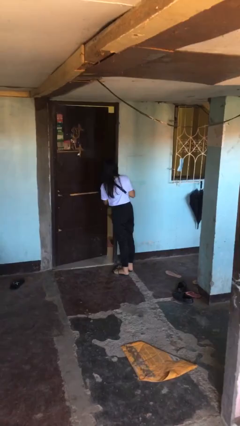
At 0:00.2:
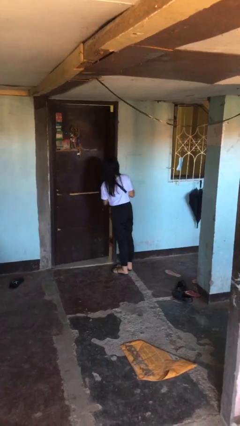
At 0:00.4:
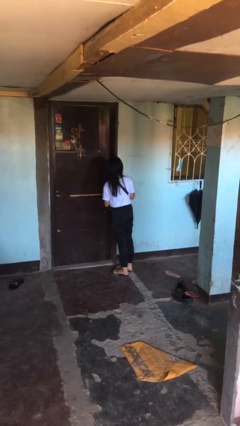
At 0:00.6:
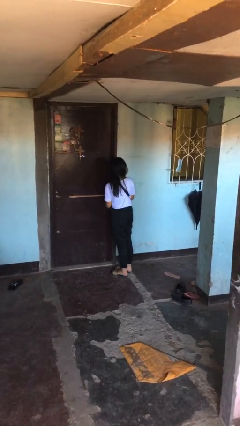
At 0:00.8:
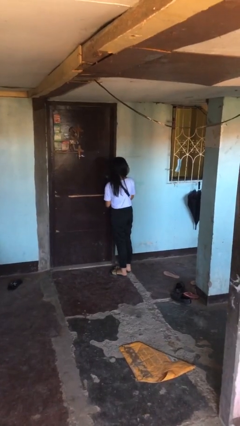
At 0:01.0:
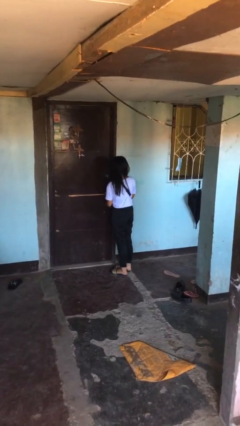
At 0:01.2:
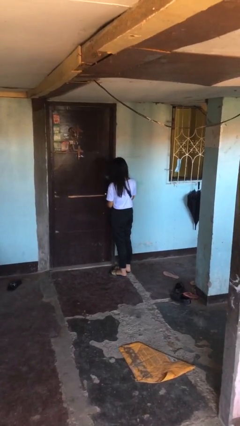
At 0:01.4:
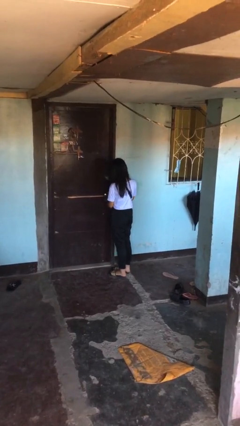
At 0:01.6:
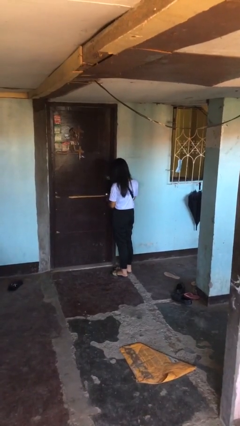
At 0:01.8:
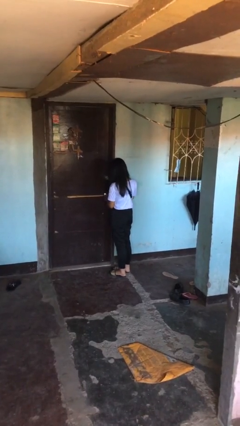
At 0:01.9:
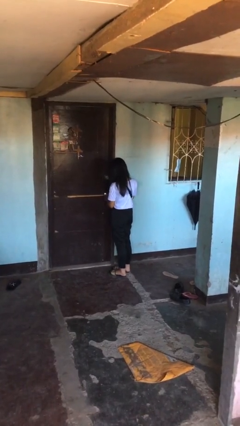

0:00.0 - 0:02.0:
person closes facility door

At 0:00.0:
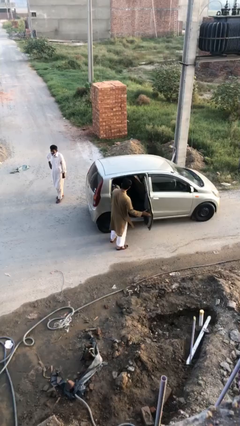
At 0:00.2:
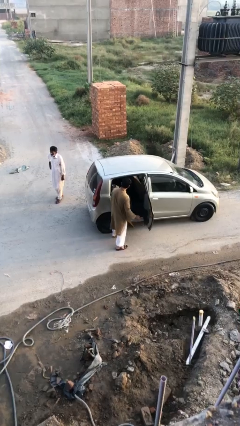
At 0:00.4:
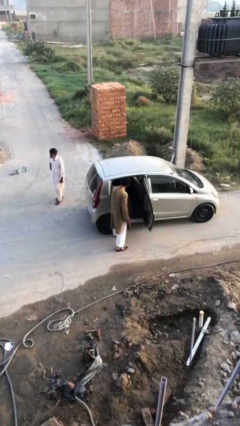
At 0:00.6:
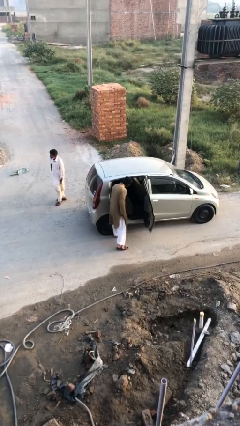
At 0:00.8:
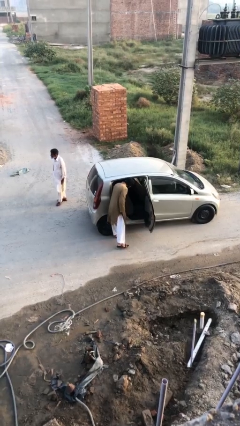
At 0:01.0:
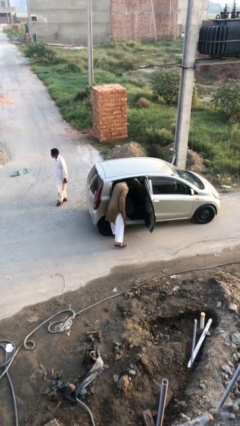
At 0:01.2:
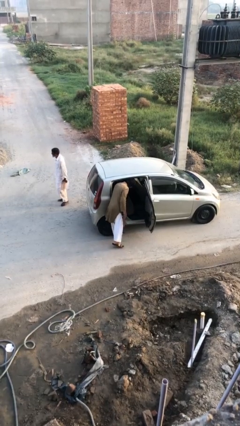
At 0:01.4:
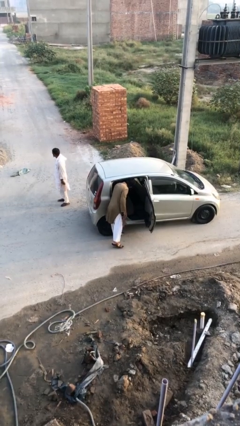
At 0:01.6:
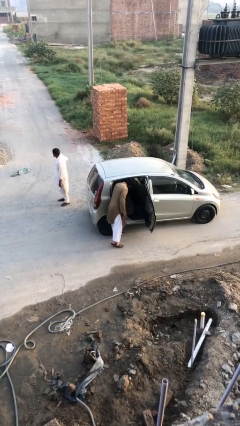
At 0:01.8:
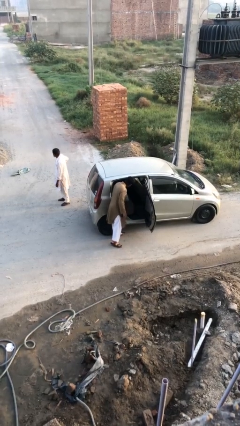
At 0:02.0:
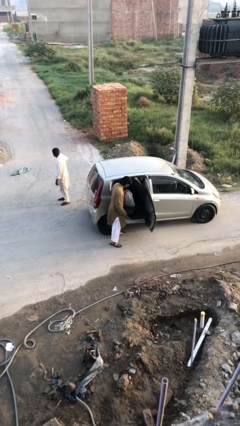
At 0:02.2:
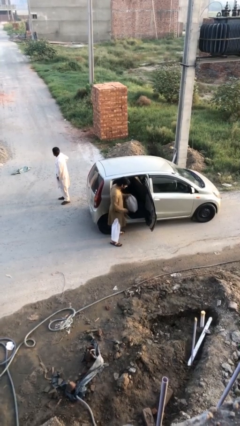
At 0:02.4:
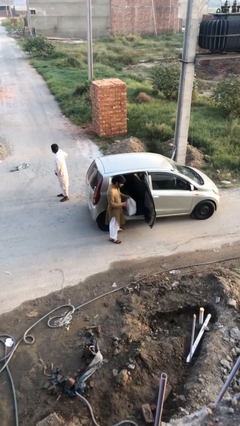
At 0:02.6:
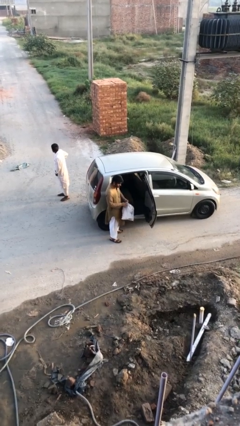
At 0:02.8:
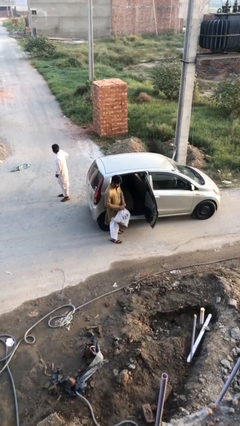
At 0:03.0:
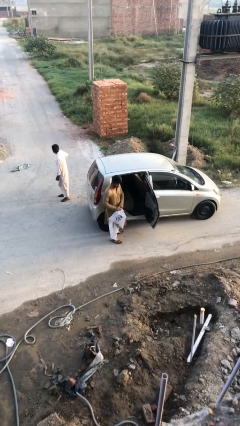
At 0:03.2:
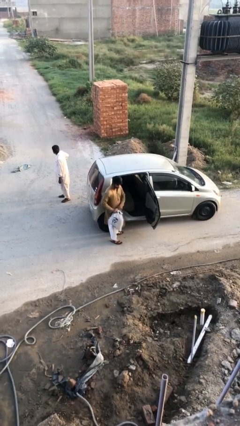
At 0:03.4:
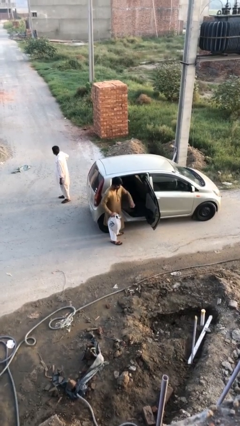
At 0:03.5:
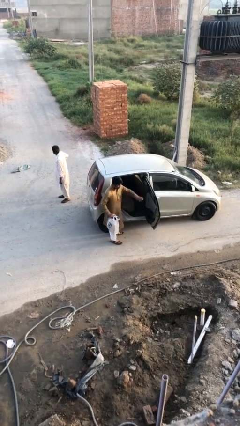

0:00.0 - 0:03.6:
person unloads car

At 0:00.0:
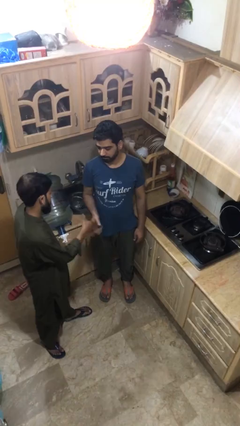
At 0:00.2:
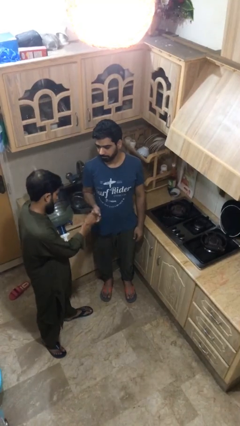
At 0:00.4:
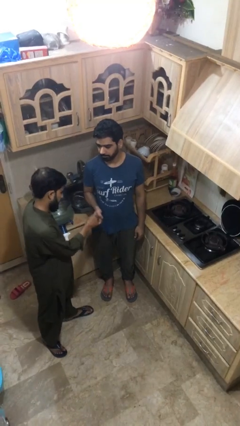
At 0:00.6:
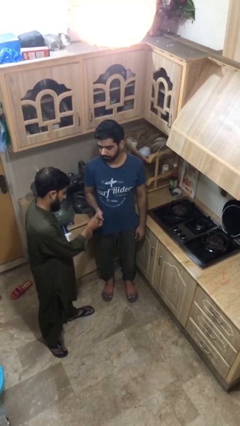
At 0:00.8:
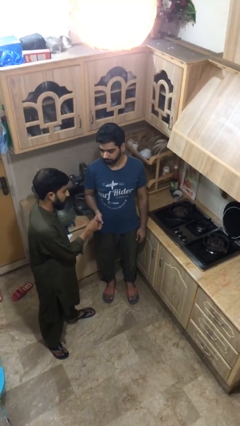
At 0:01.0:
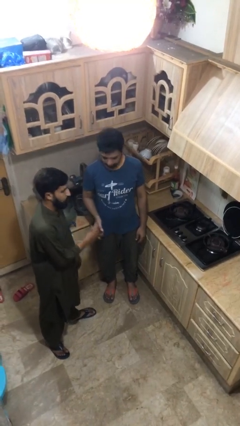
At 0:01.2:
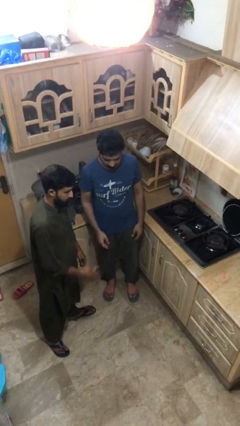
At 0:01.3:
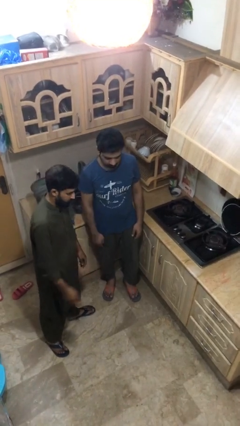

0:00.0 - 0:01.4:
person shakes hand

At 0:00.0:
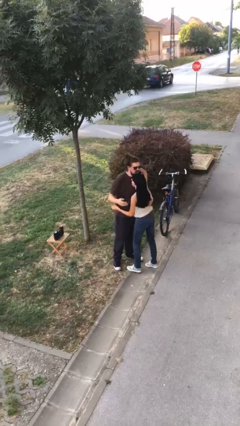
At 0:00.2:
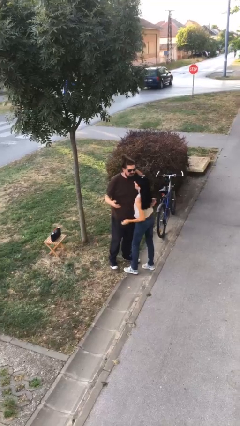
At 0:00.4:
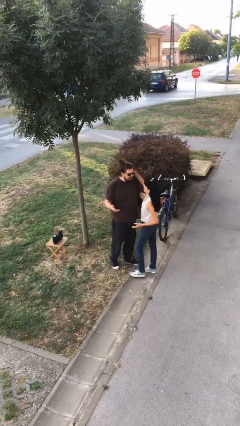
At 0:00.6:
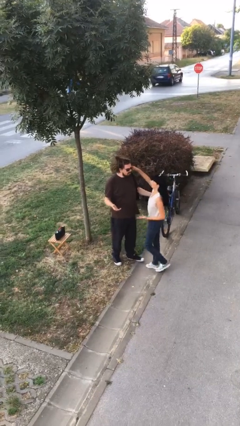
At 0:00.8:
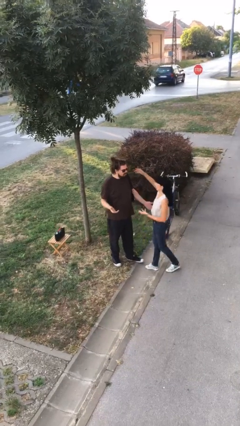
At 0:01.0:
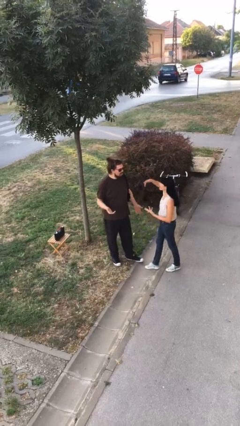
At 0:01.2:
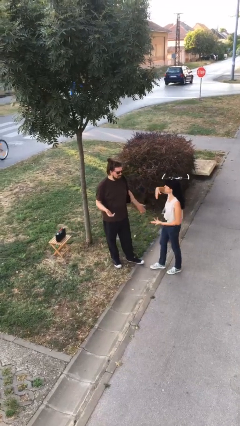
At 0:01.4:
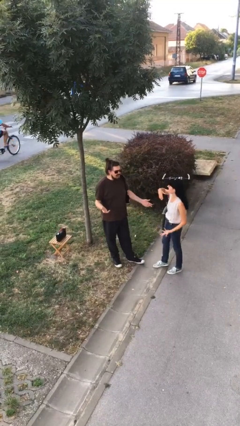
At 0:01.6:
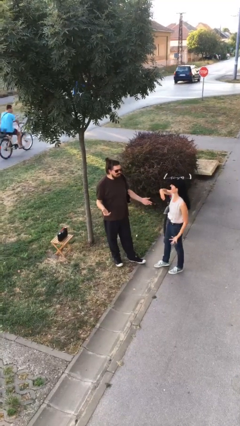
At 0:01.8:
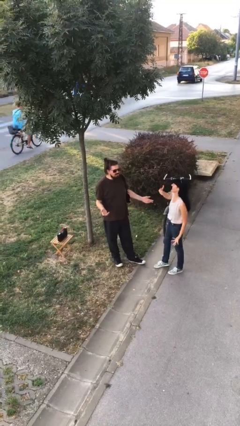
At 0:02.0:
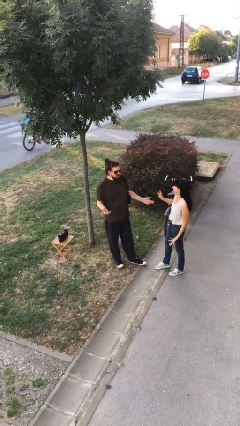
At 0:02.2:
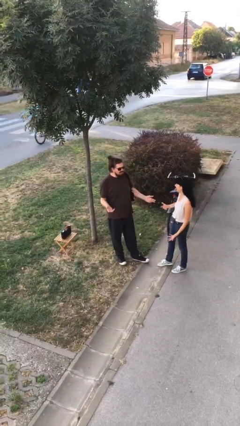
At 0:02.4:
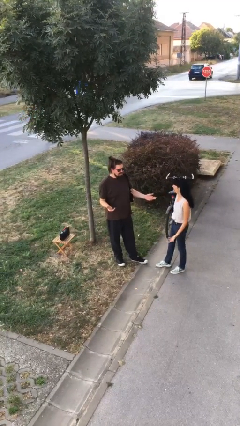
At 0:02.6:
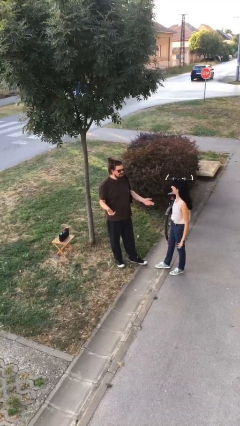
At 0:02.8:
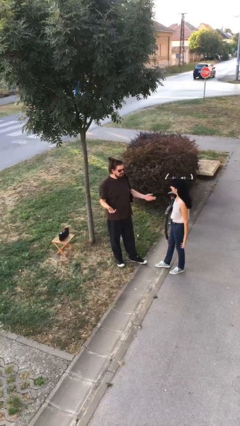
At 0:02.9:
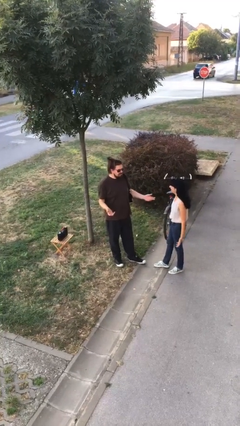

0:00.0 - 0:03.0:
person talks to person

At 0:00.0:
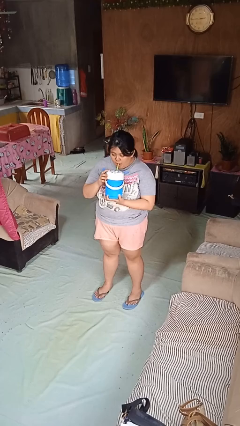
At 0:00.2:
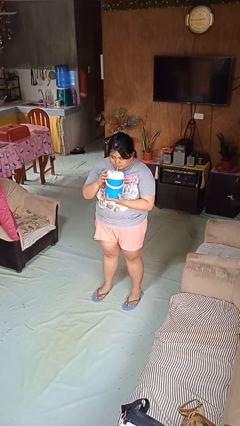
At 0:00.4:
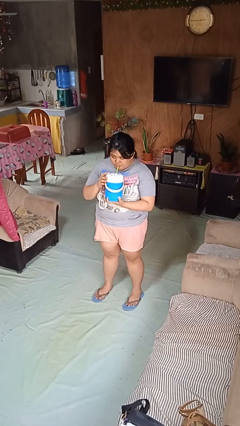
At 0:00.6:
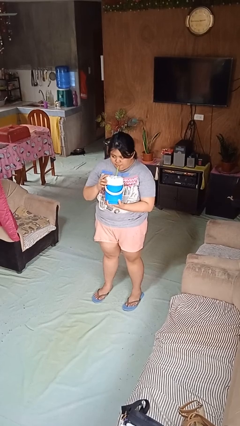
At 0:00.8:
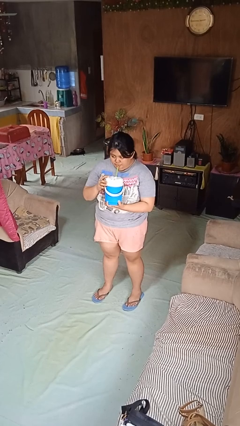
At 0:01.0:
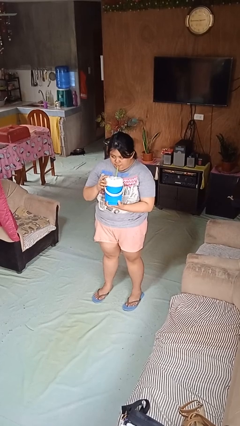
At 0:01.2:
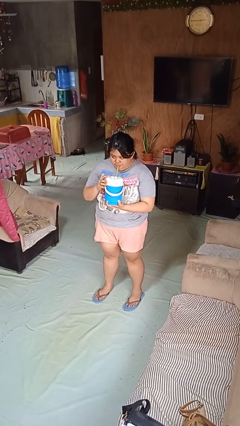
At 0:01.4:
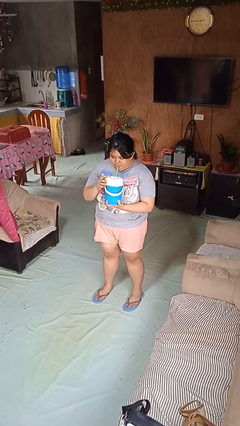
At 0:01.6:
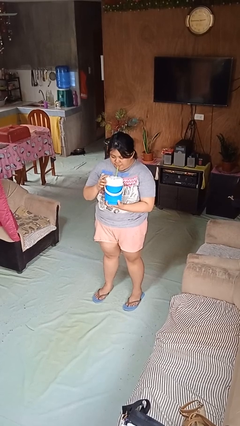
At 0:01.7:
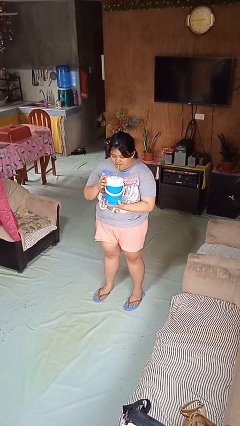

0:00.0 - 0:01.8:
person drinks from straw

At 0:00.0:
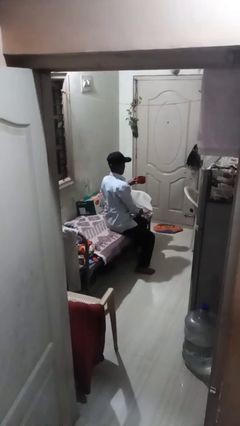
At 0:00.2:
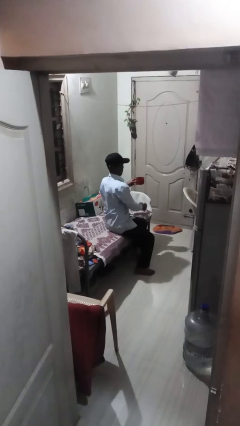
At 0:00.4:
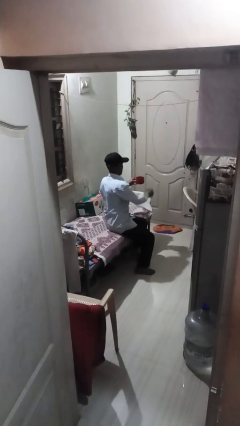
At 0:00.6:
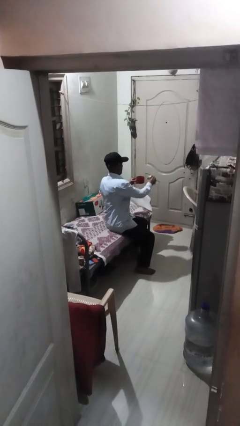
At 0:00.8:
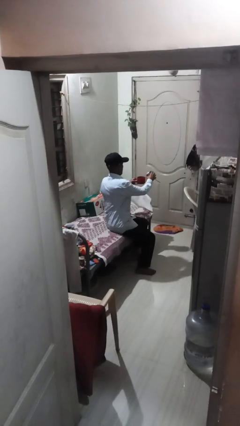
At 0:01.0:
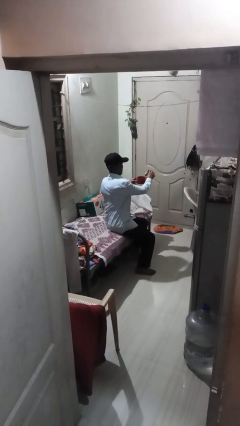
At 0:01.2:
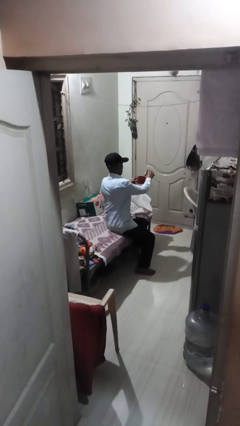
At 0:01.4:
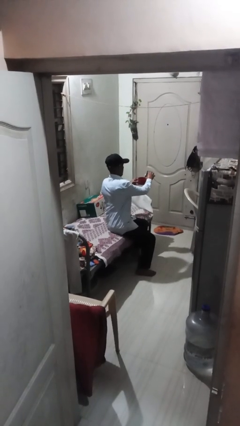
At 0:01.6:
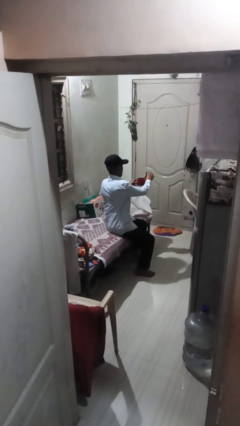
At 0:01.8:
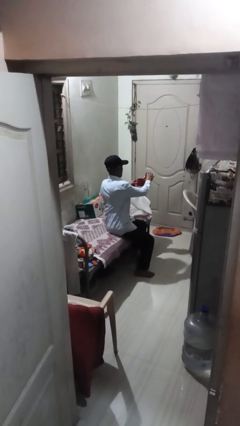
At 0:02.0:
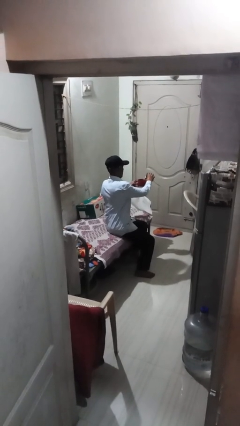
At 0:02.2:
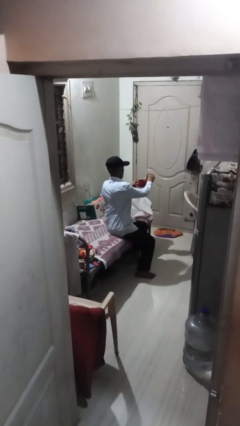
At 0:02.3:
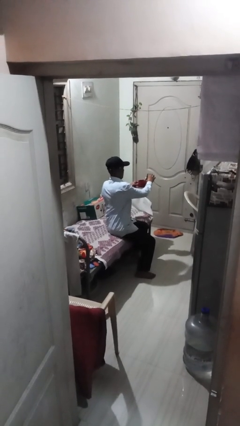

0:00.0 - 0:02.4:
person pours coffee into mug

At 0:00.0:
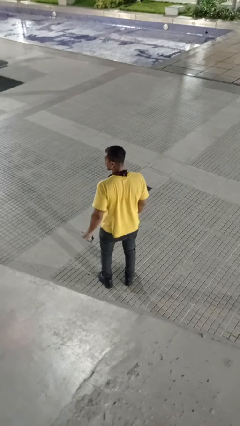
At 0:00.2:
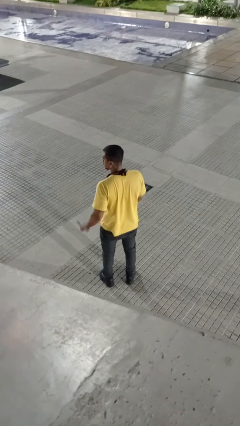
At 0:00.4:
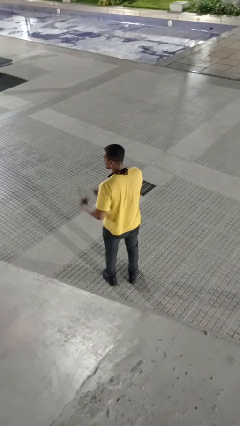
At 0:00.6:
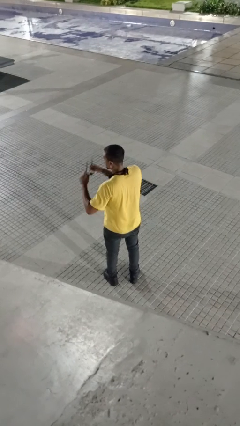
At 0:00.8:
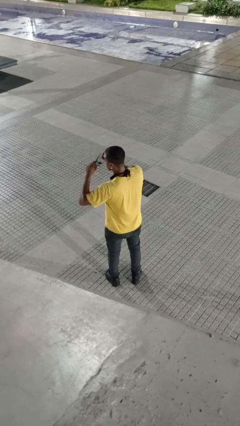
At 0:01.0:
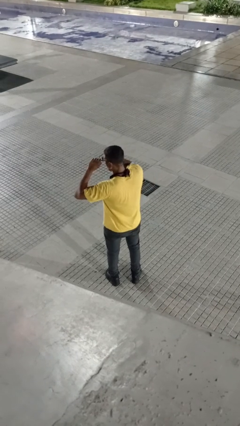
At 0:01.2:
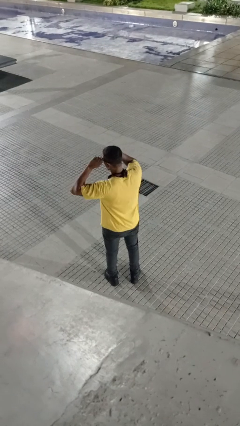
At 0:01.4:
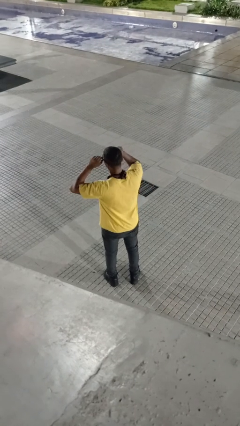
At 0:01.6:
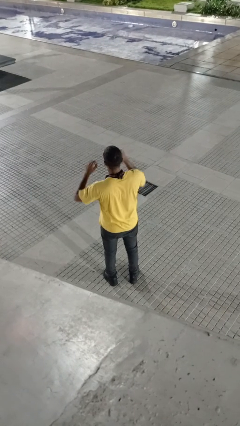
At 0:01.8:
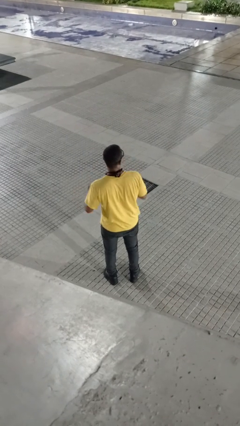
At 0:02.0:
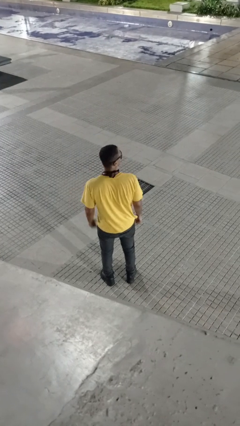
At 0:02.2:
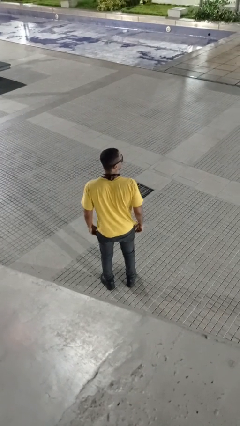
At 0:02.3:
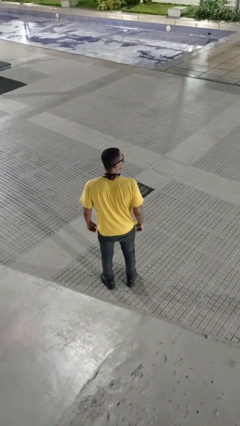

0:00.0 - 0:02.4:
person puts on glasses

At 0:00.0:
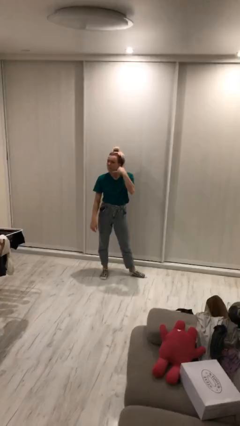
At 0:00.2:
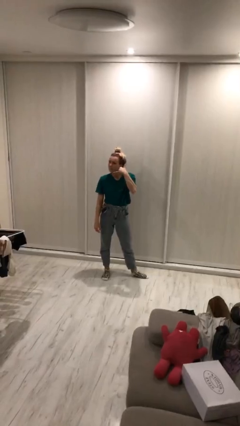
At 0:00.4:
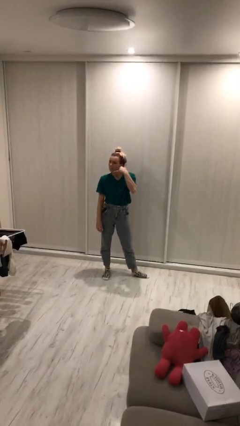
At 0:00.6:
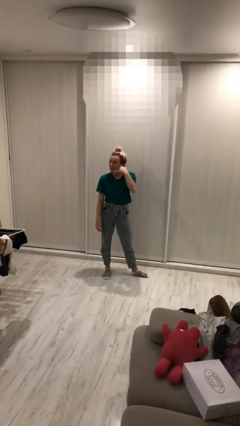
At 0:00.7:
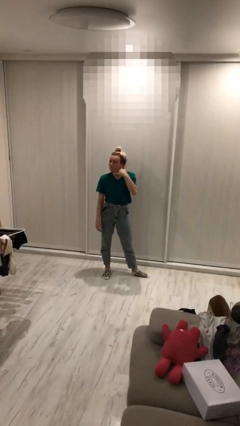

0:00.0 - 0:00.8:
person gestures call me
